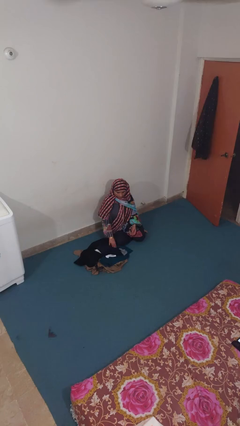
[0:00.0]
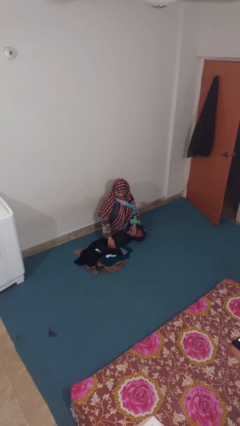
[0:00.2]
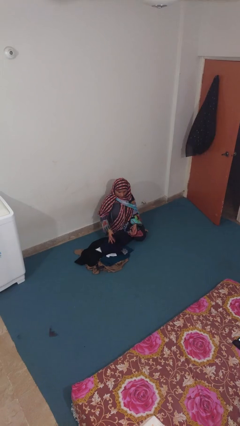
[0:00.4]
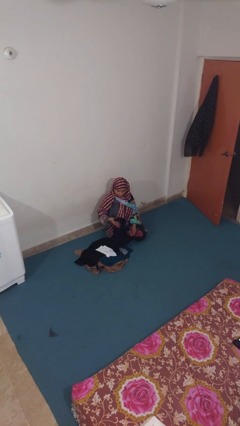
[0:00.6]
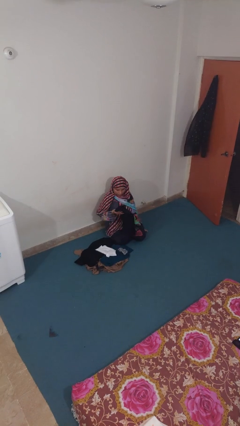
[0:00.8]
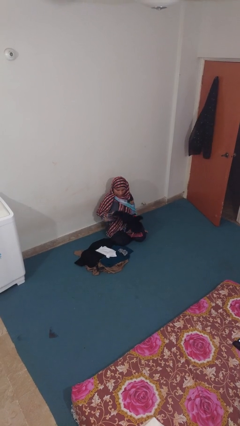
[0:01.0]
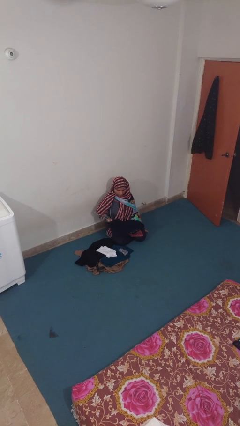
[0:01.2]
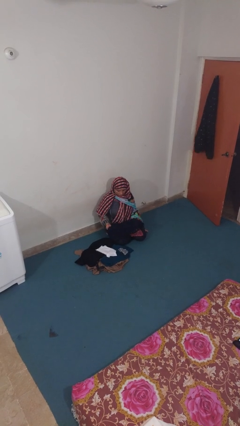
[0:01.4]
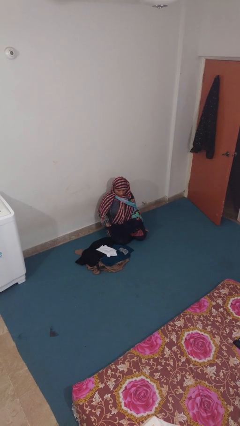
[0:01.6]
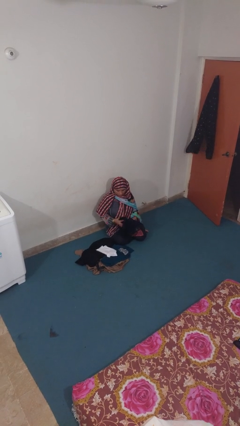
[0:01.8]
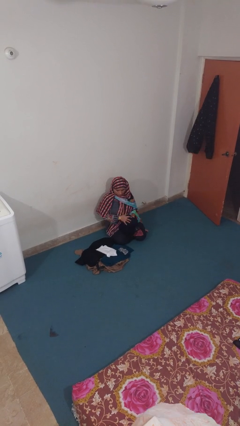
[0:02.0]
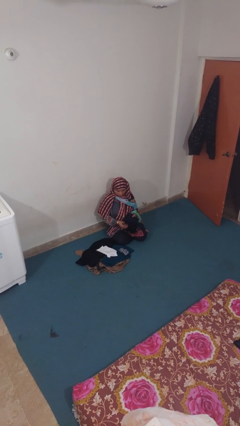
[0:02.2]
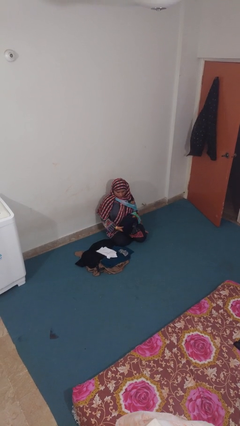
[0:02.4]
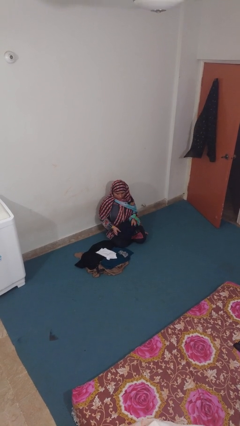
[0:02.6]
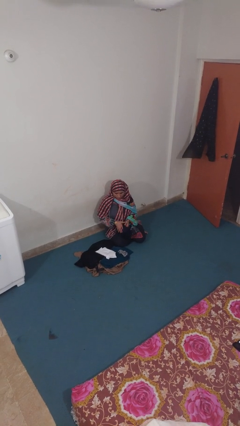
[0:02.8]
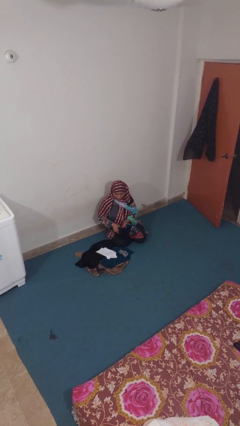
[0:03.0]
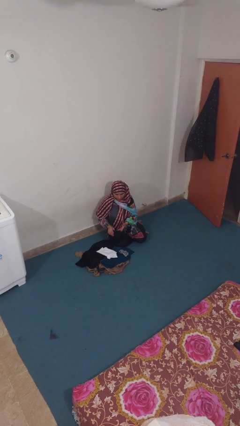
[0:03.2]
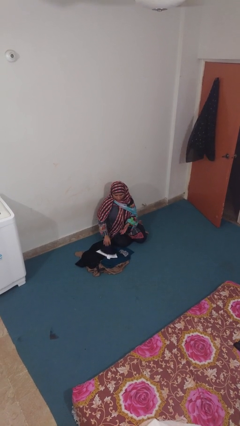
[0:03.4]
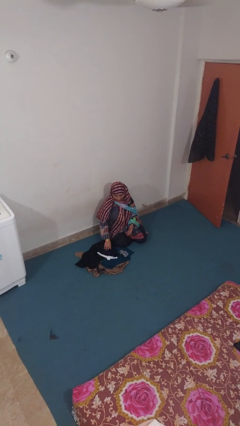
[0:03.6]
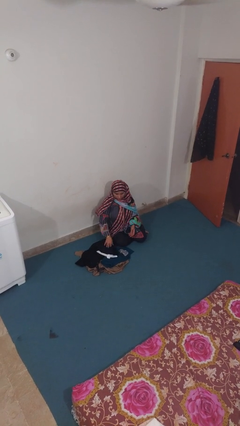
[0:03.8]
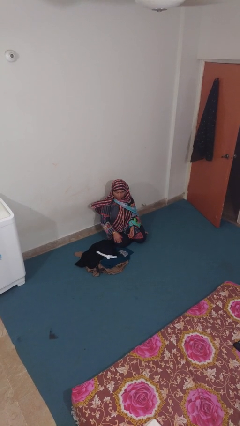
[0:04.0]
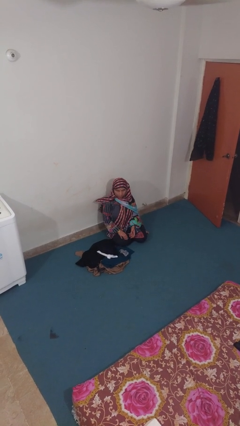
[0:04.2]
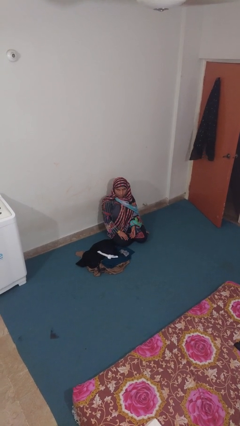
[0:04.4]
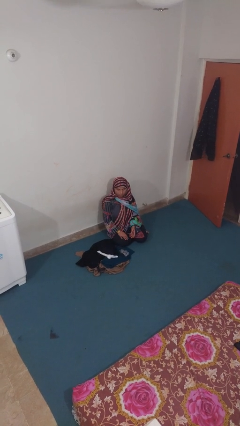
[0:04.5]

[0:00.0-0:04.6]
person folds pants

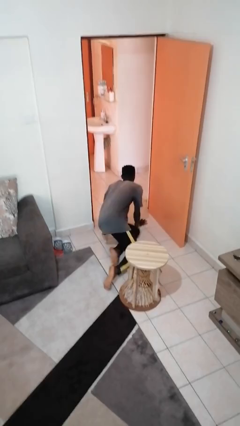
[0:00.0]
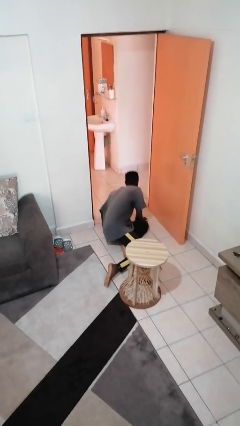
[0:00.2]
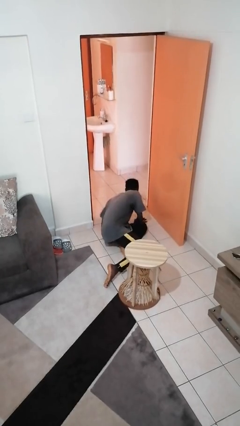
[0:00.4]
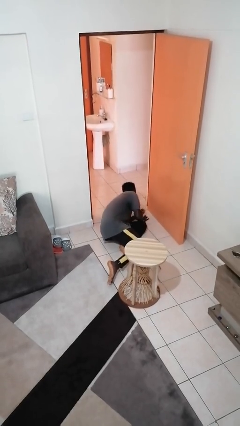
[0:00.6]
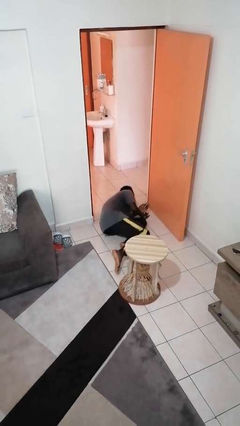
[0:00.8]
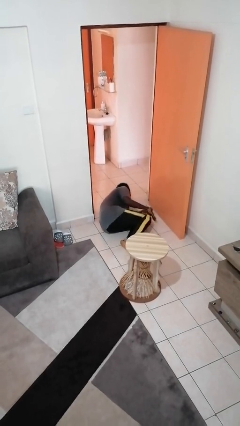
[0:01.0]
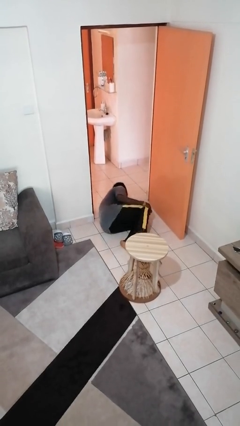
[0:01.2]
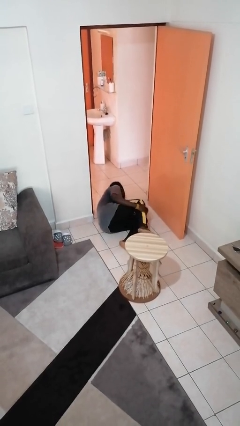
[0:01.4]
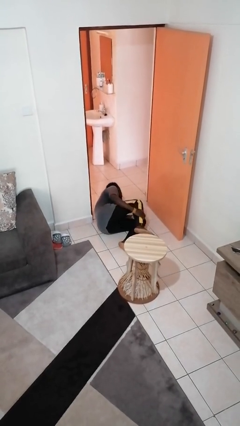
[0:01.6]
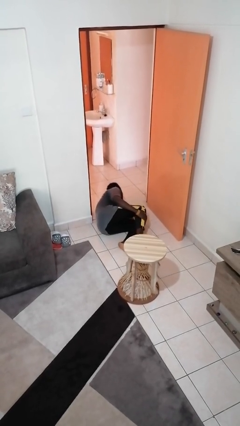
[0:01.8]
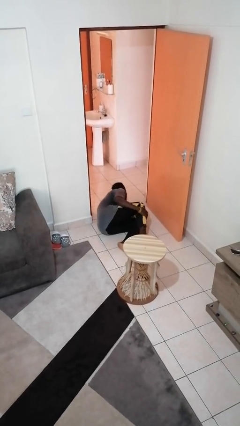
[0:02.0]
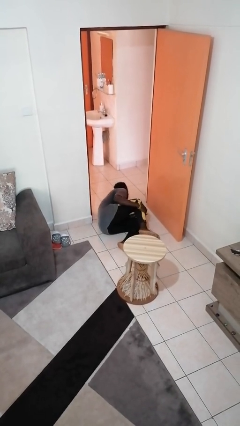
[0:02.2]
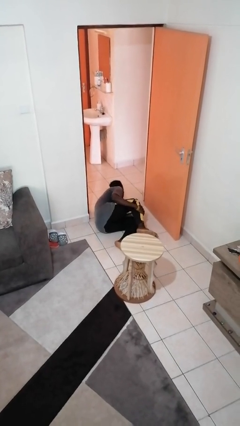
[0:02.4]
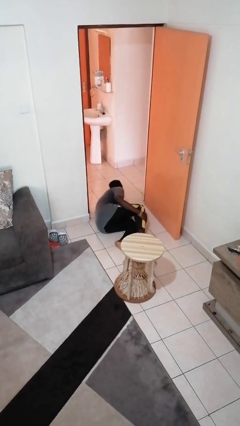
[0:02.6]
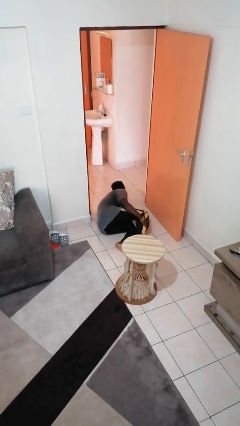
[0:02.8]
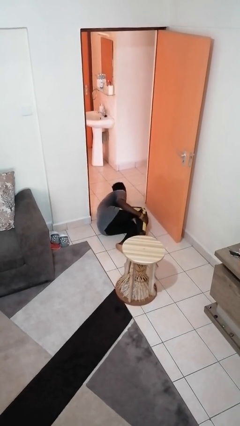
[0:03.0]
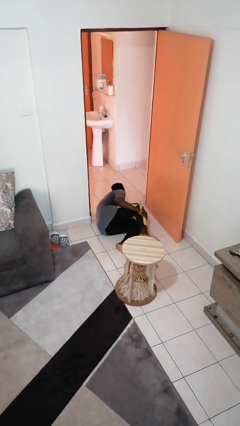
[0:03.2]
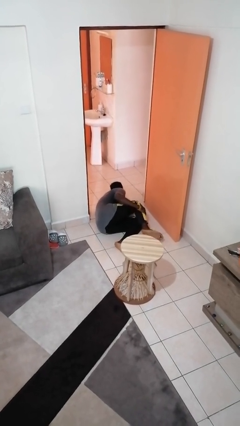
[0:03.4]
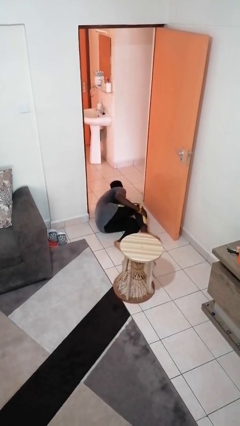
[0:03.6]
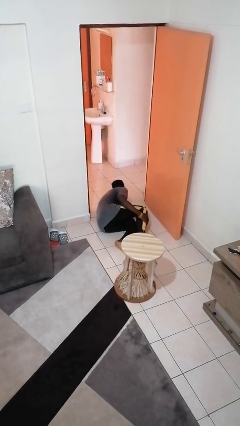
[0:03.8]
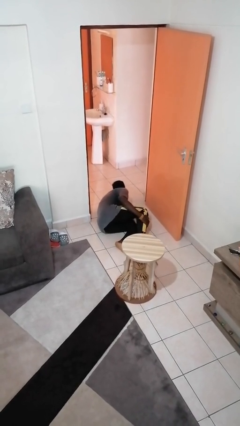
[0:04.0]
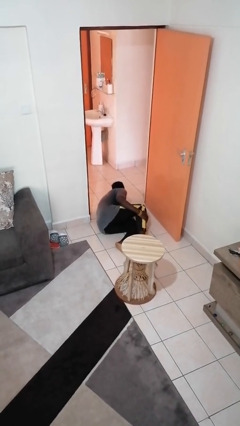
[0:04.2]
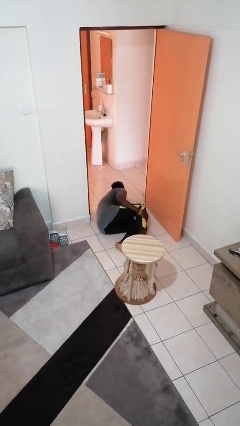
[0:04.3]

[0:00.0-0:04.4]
person lies down on floor

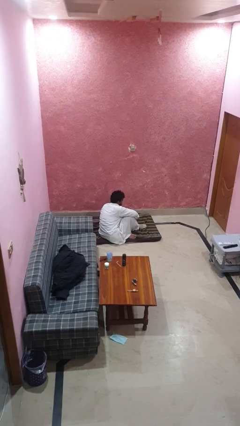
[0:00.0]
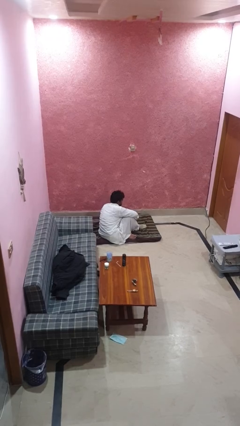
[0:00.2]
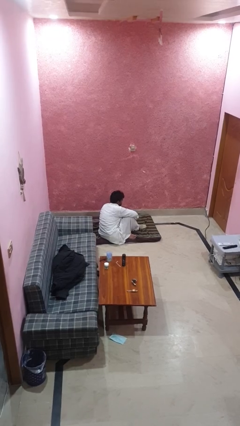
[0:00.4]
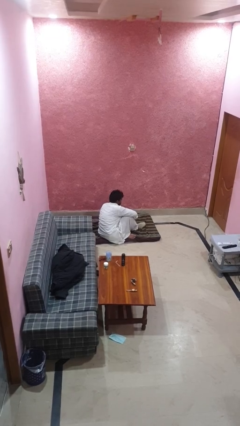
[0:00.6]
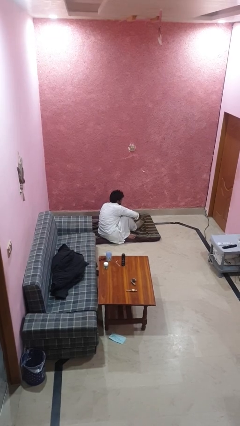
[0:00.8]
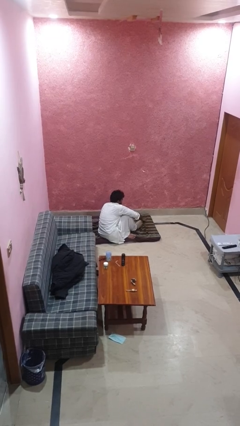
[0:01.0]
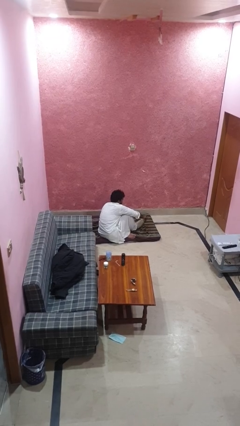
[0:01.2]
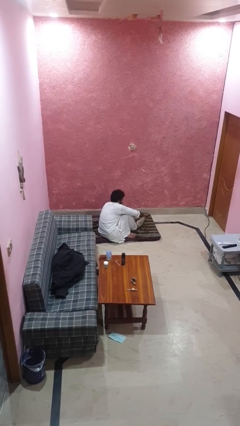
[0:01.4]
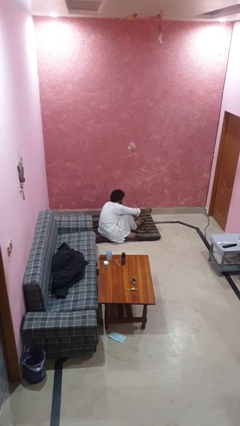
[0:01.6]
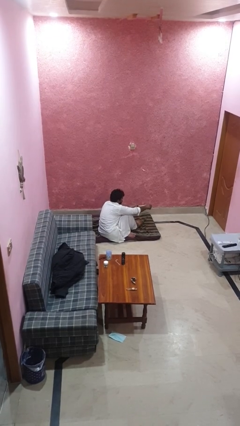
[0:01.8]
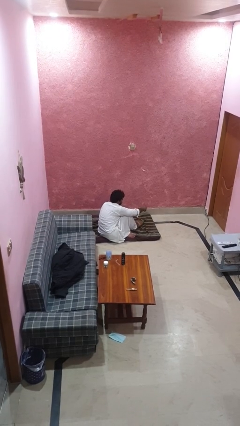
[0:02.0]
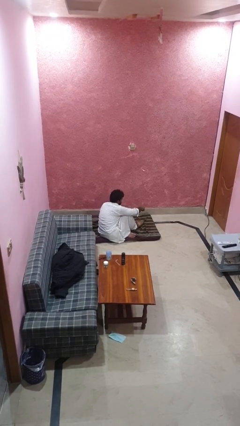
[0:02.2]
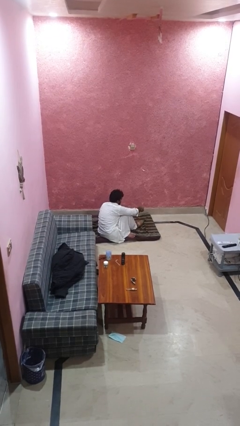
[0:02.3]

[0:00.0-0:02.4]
person takes off socks

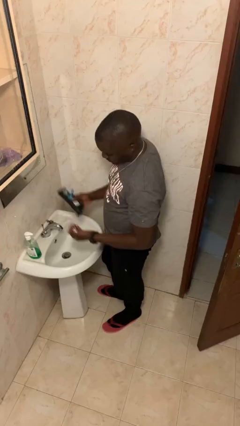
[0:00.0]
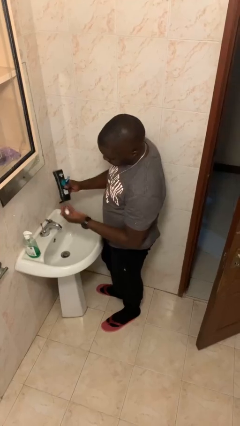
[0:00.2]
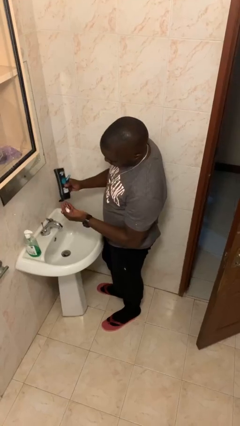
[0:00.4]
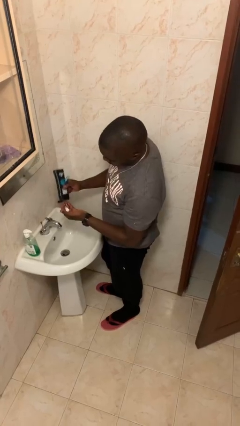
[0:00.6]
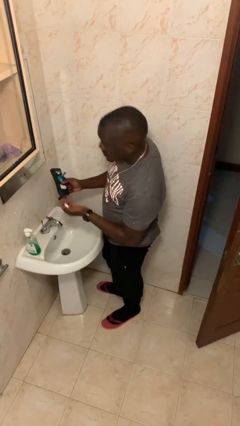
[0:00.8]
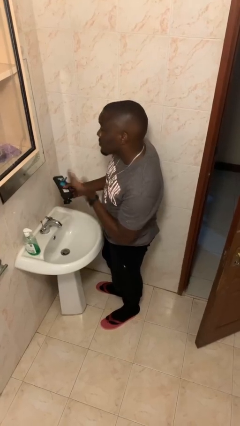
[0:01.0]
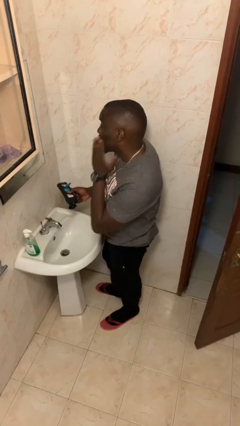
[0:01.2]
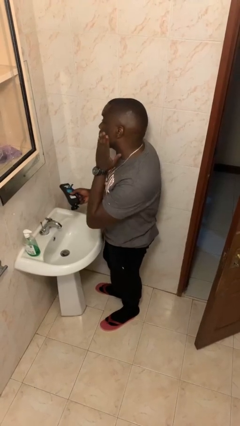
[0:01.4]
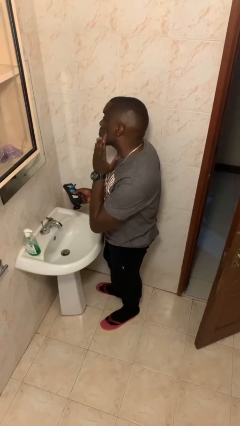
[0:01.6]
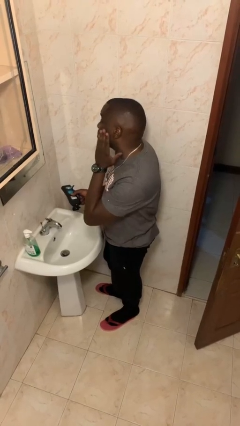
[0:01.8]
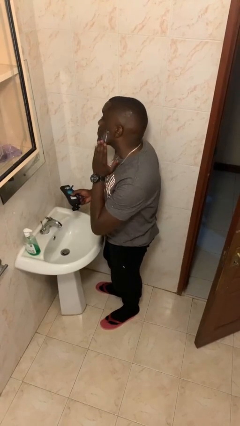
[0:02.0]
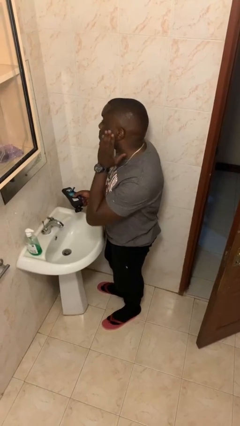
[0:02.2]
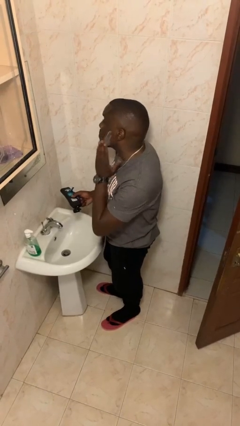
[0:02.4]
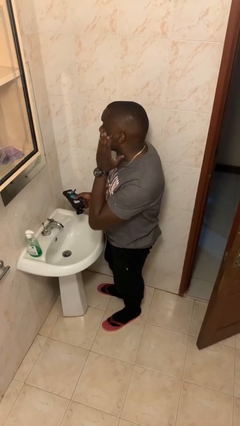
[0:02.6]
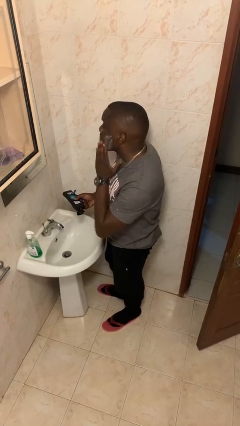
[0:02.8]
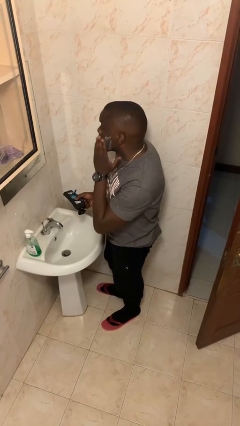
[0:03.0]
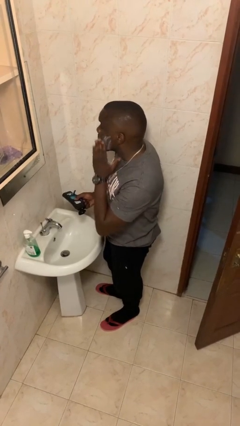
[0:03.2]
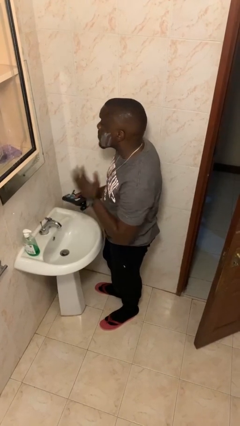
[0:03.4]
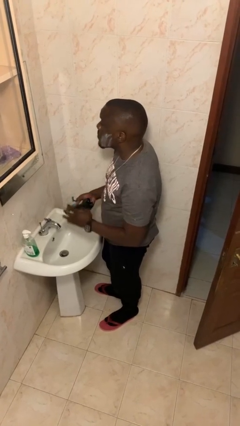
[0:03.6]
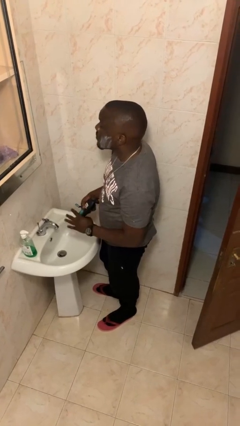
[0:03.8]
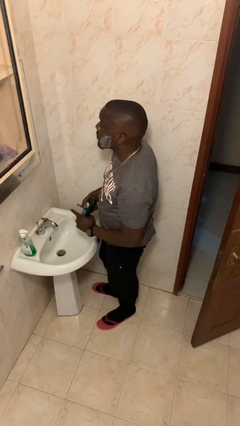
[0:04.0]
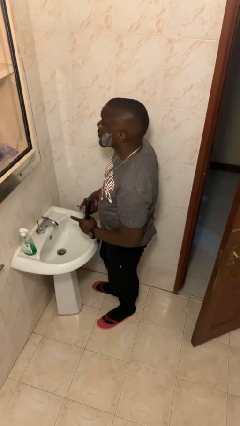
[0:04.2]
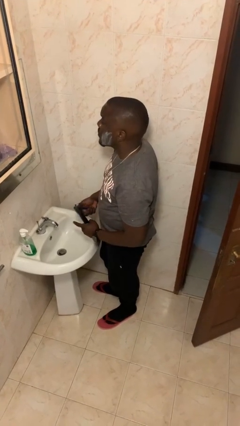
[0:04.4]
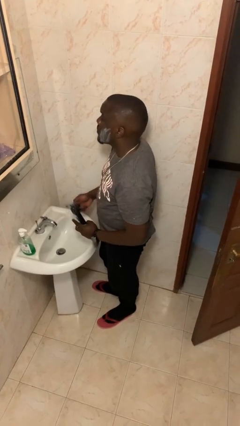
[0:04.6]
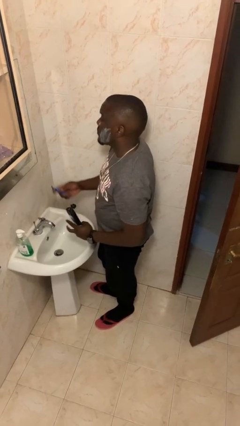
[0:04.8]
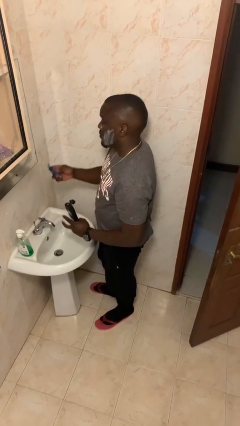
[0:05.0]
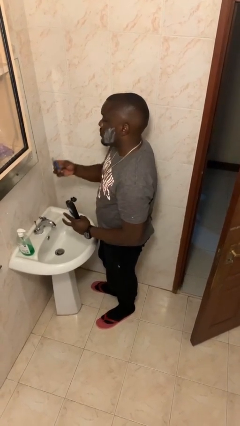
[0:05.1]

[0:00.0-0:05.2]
person applies shaving cream

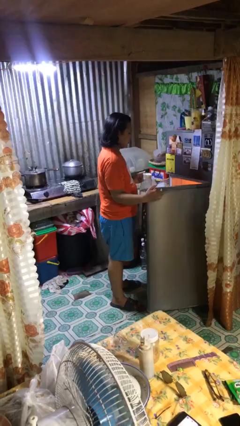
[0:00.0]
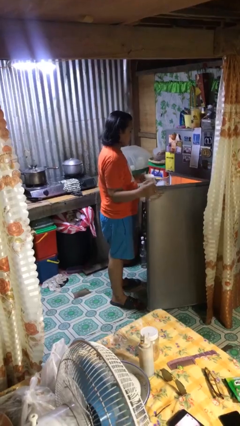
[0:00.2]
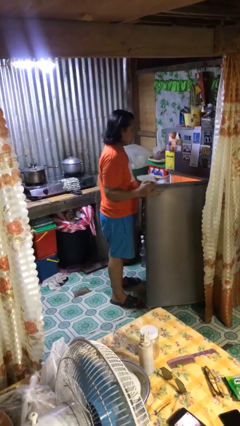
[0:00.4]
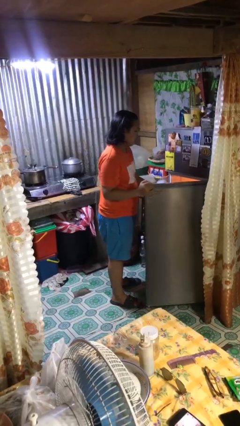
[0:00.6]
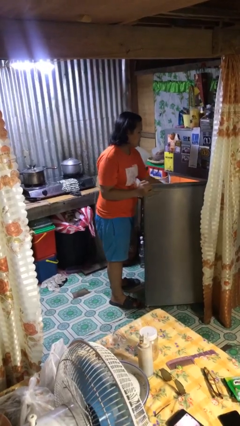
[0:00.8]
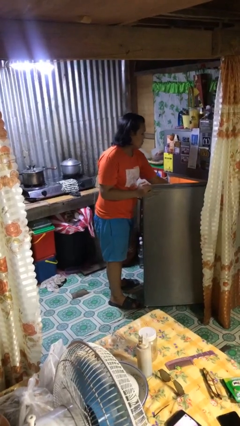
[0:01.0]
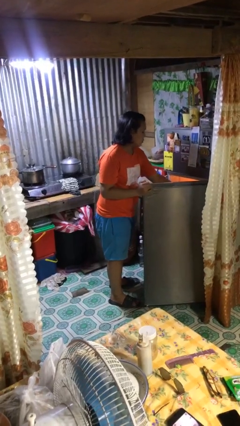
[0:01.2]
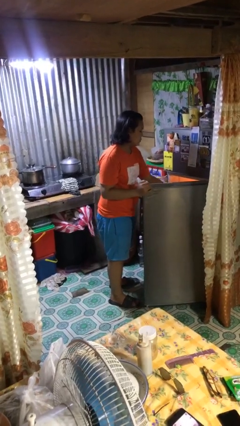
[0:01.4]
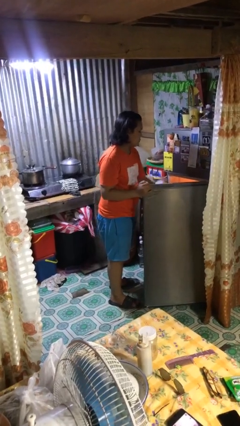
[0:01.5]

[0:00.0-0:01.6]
person puts object into refrigerator
